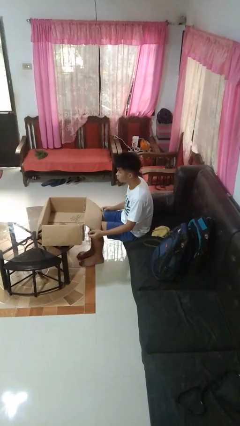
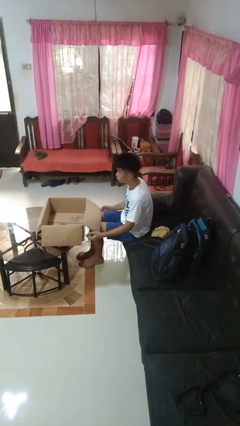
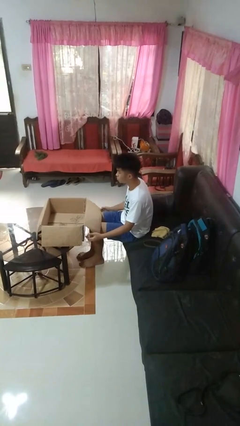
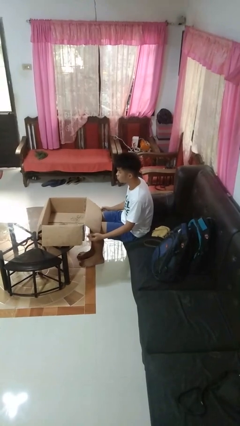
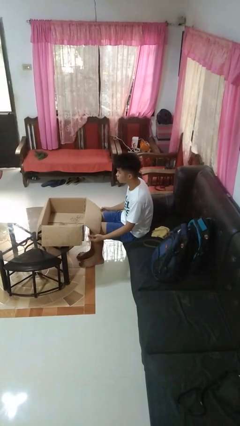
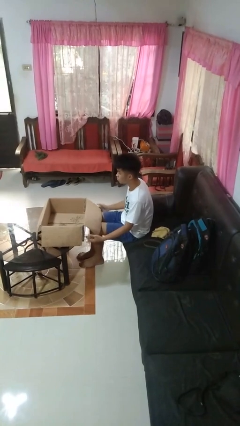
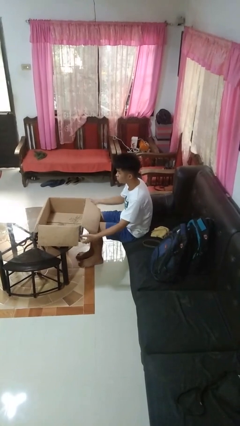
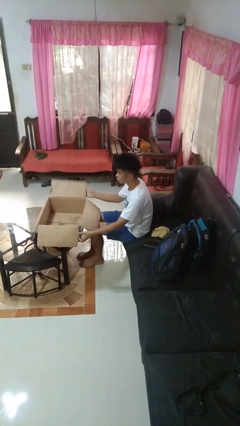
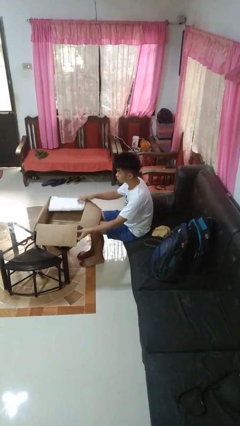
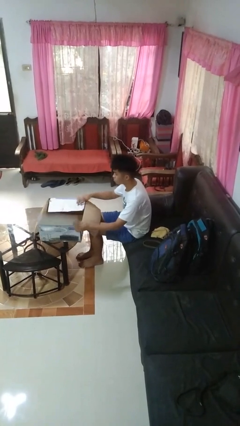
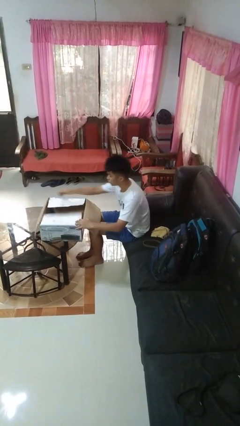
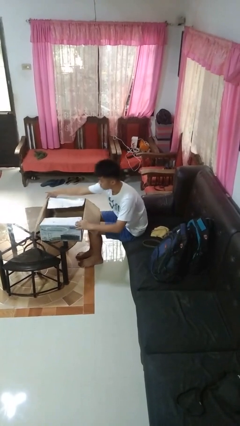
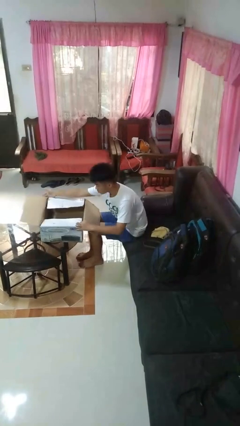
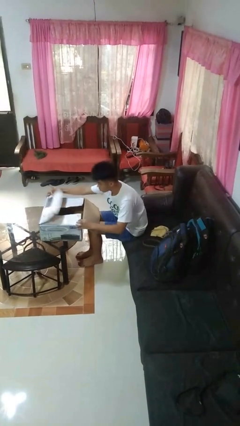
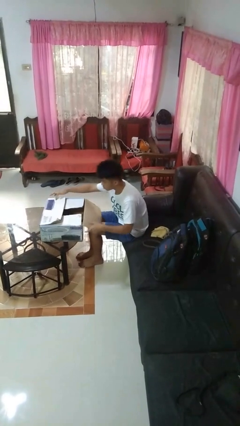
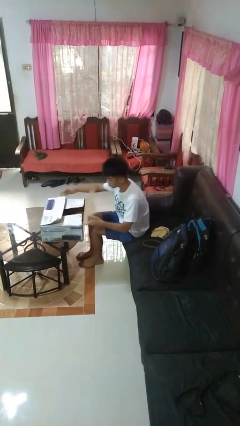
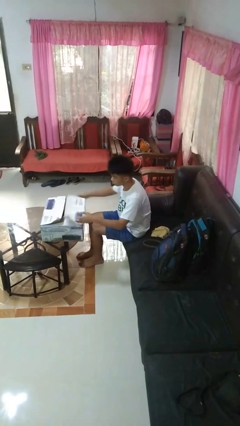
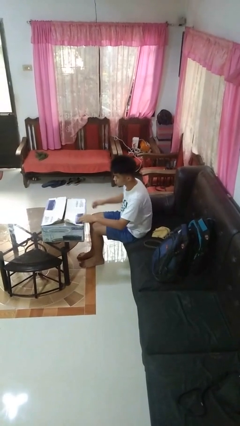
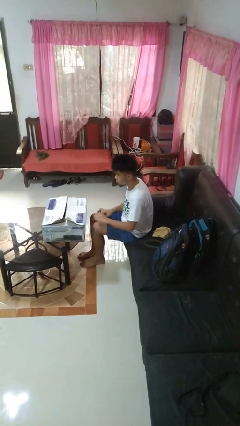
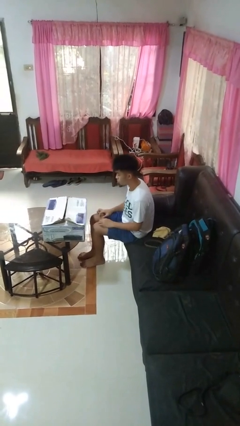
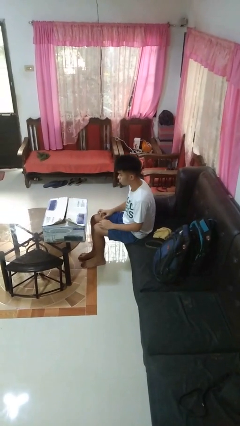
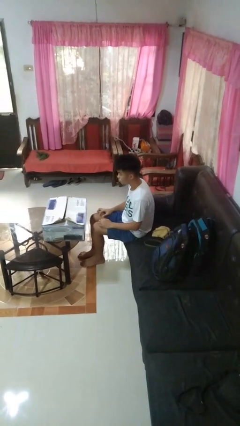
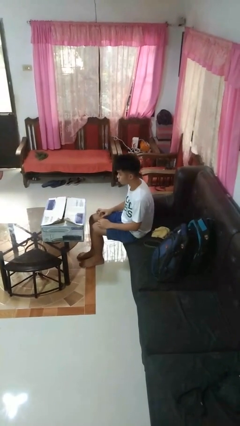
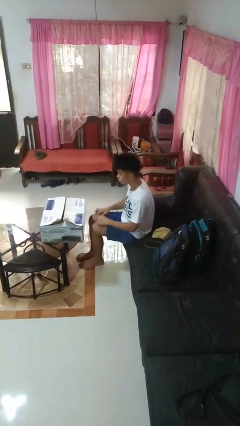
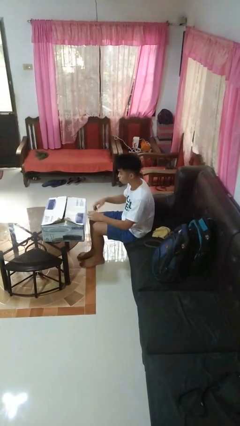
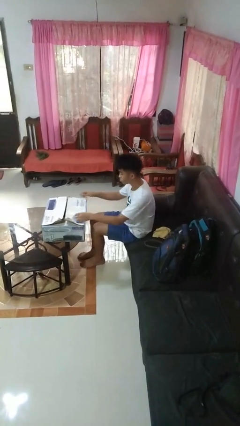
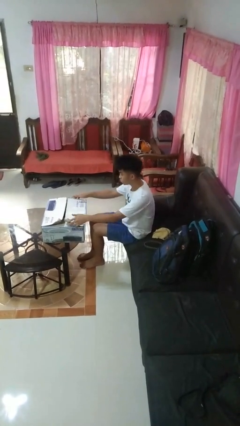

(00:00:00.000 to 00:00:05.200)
person closes box

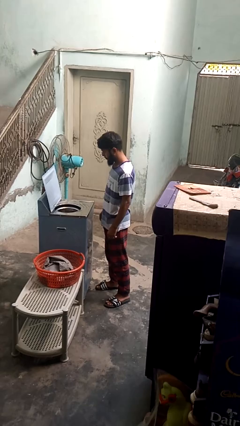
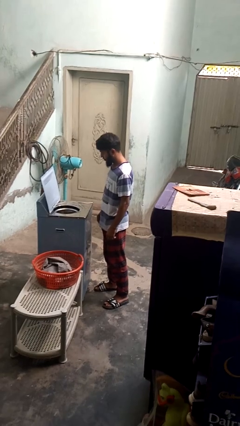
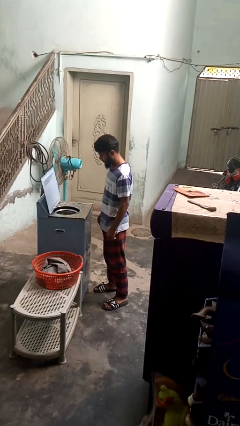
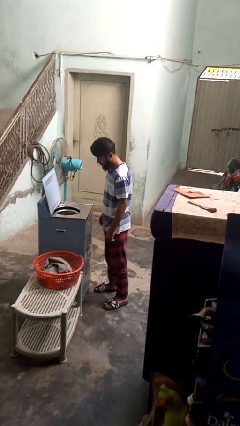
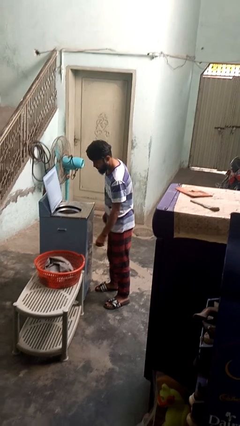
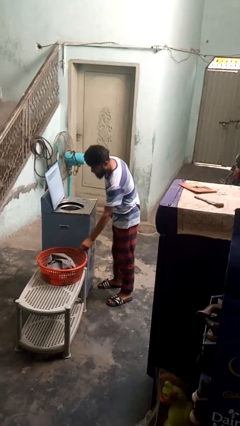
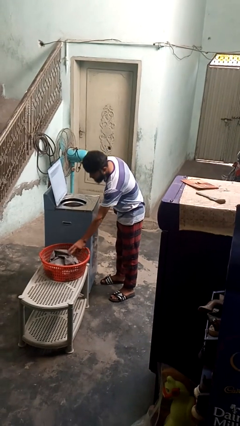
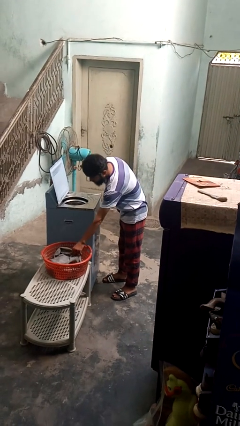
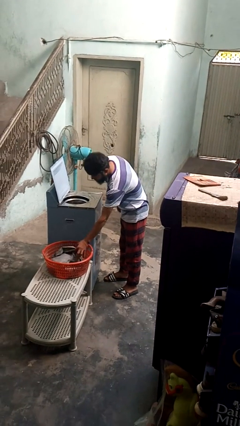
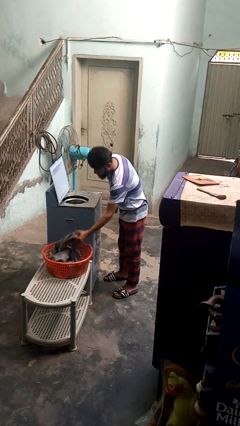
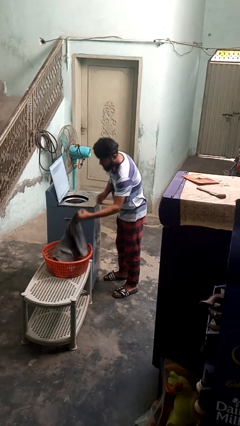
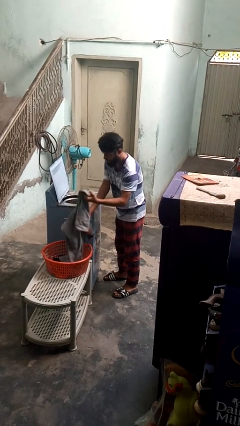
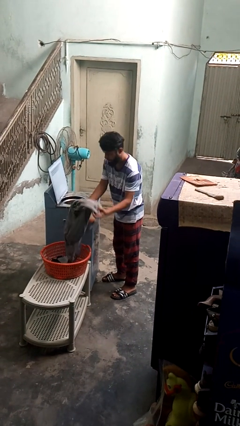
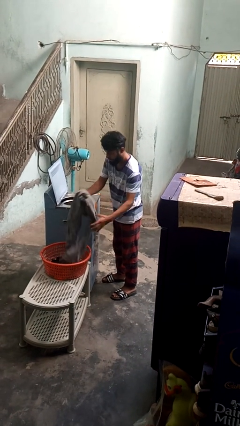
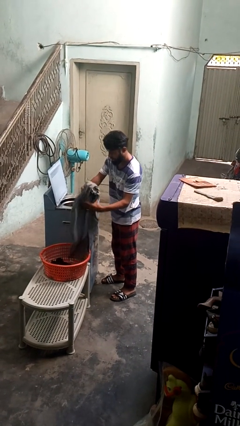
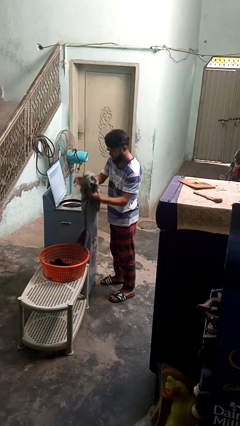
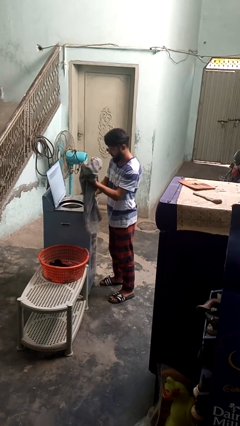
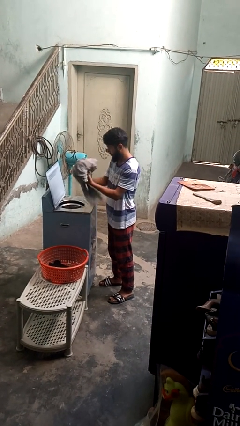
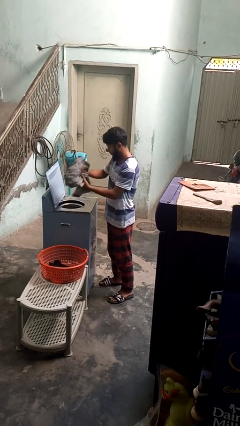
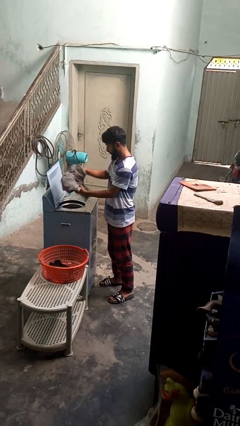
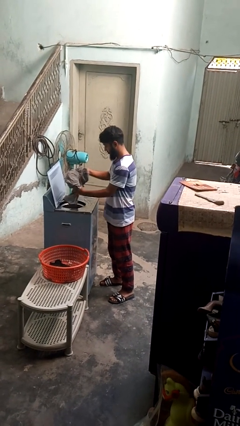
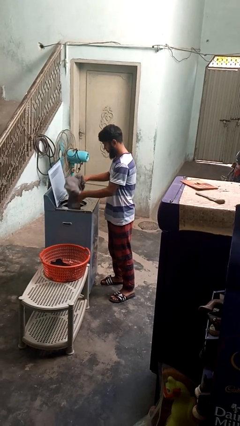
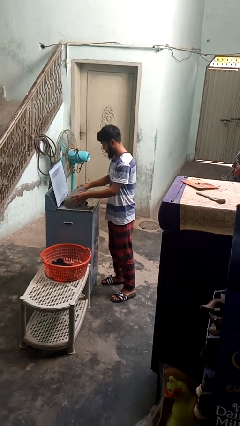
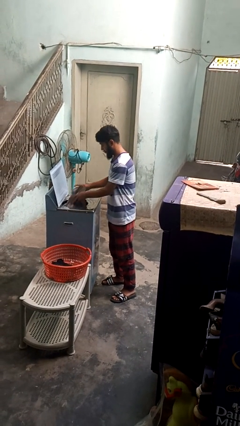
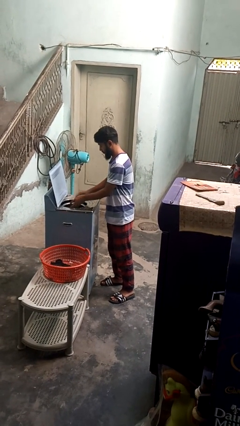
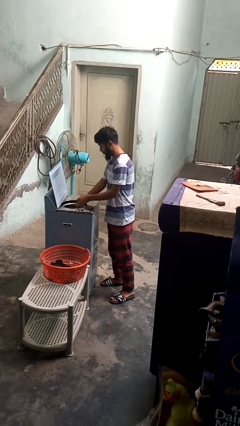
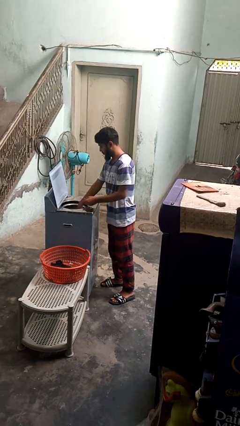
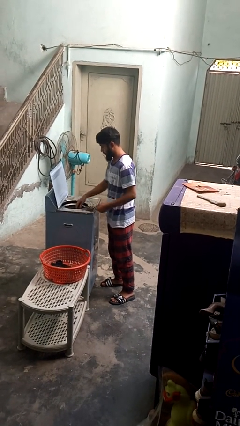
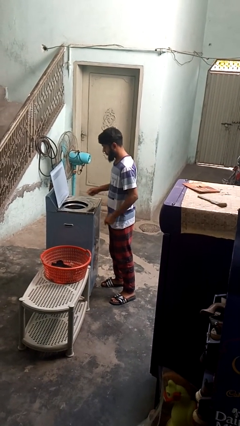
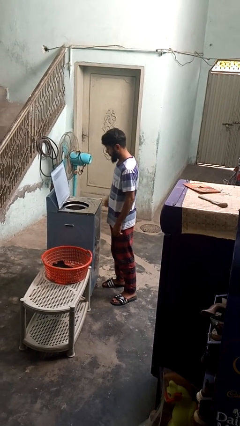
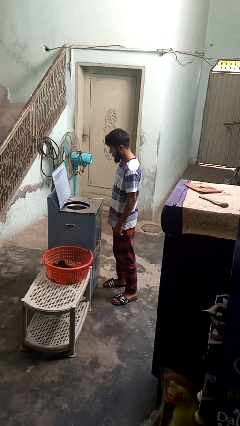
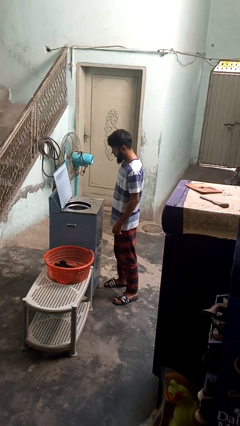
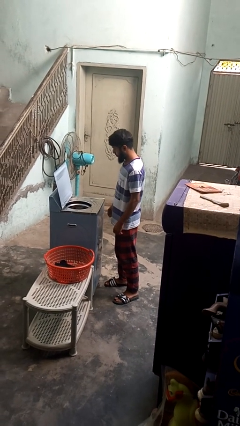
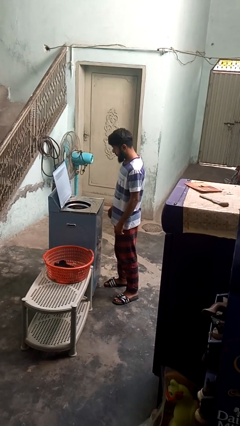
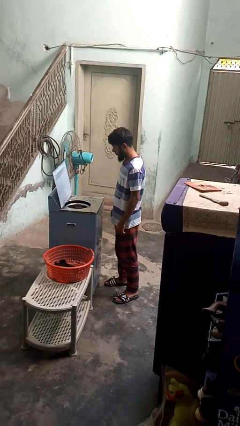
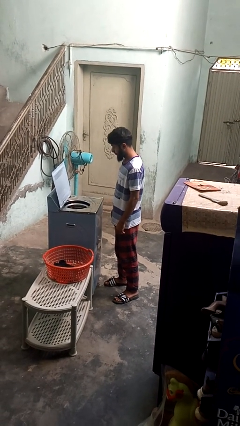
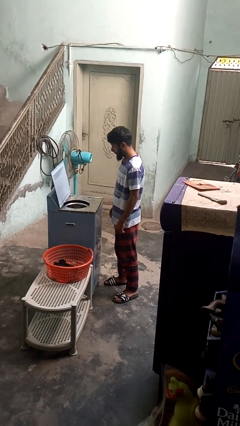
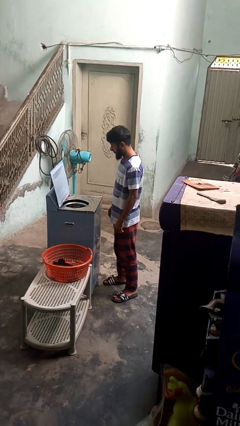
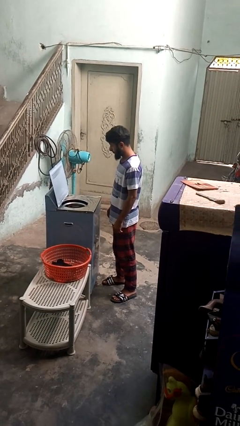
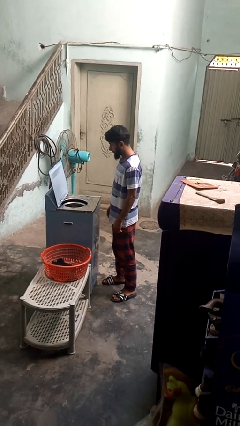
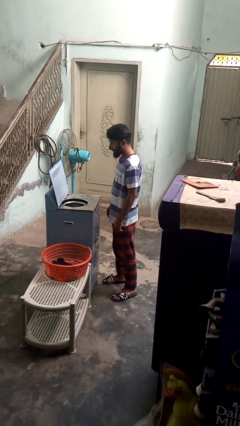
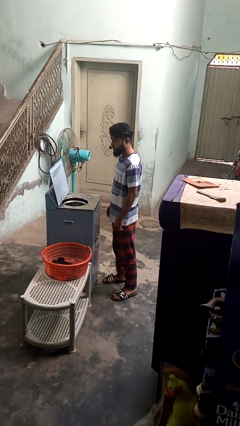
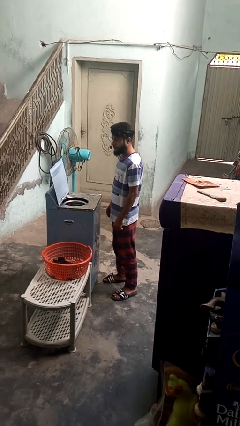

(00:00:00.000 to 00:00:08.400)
person loads clotheswasher

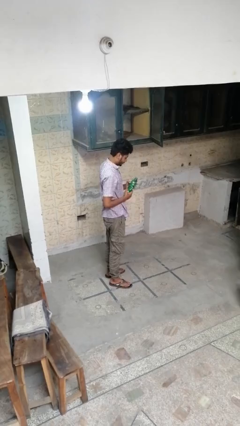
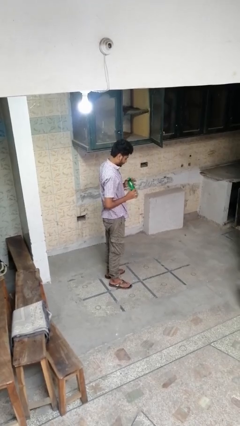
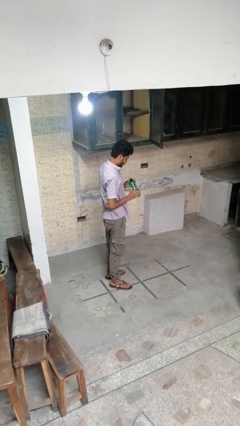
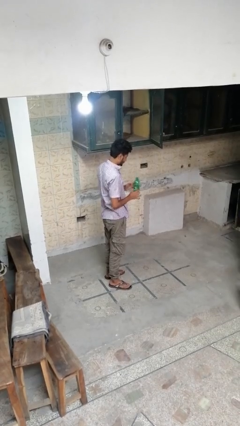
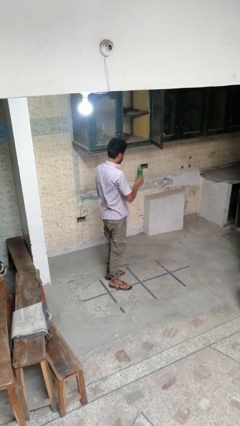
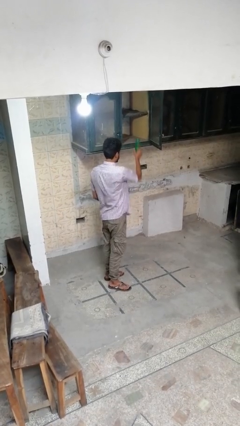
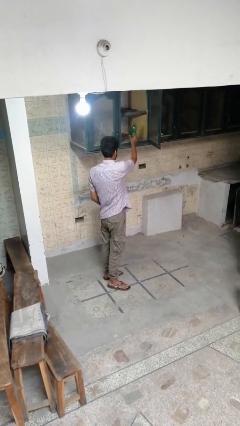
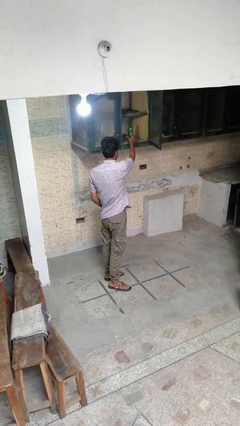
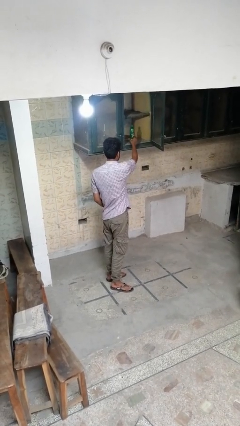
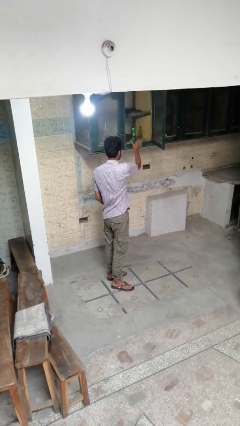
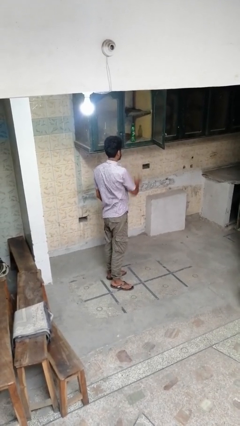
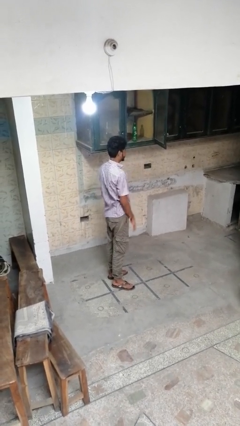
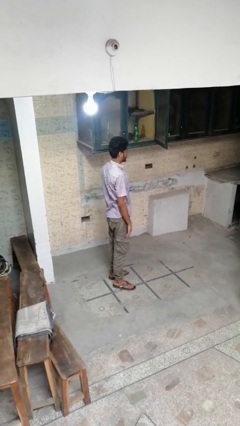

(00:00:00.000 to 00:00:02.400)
person puts down object into cabinet

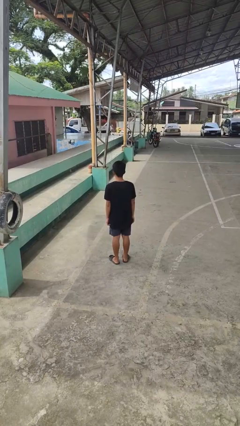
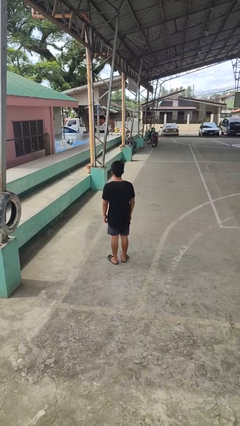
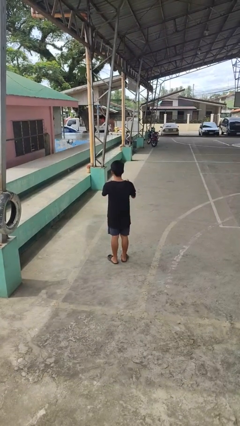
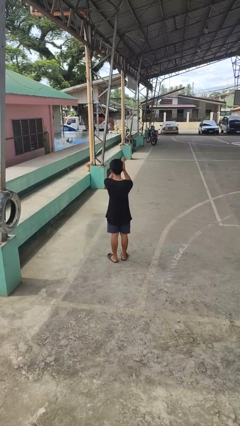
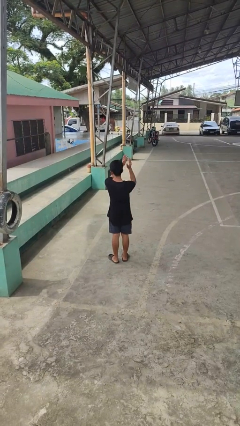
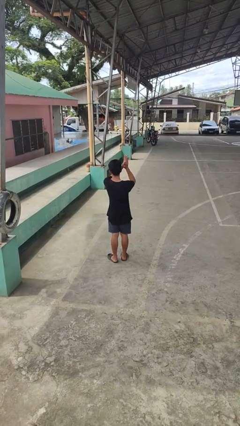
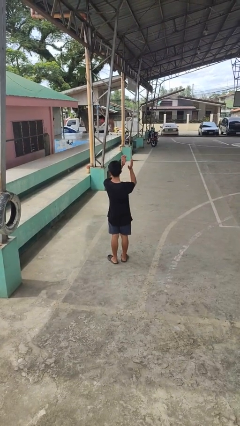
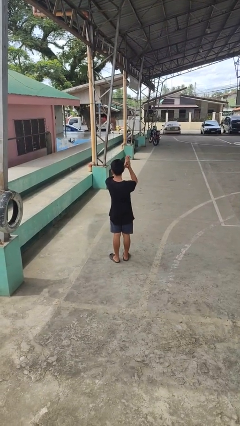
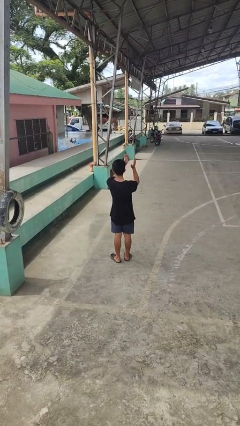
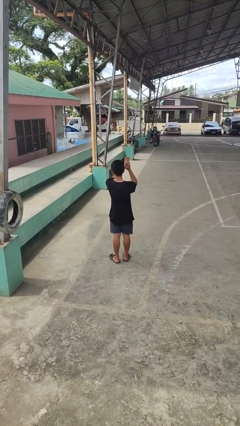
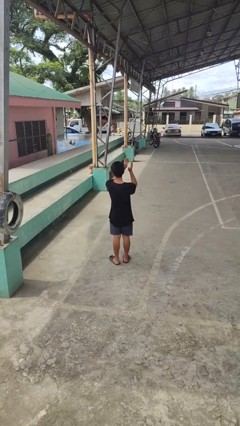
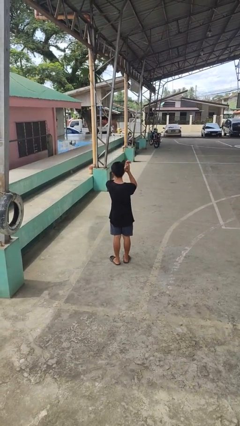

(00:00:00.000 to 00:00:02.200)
person claps hands
